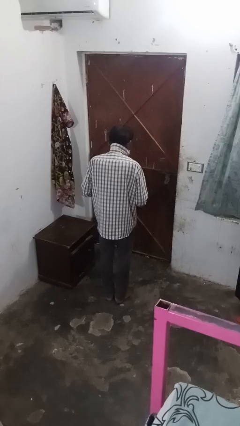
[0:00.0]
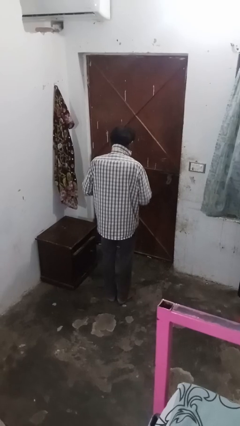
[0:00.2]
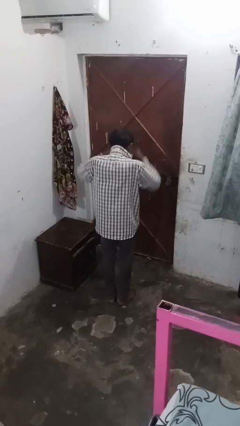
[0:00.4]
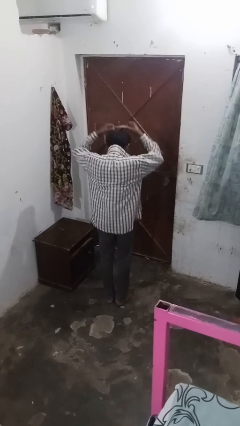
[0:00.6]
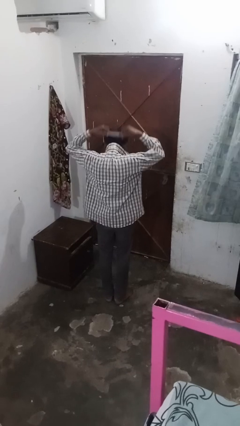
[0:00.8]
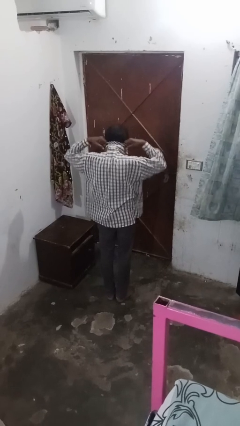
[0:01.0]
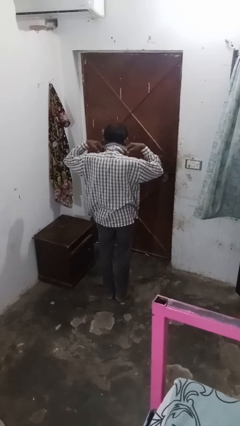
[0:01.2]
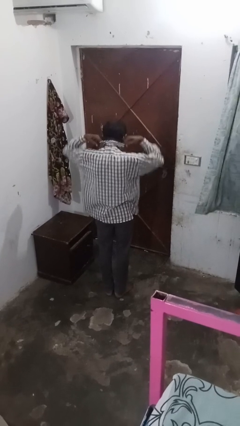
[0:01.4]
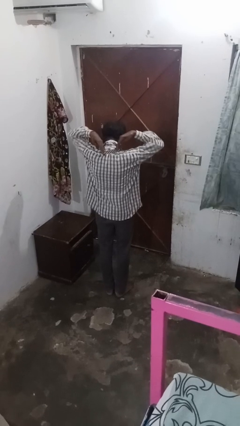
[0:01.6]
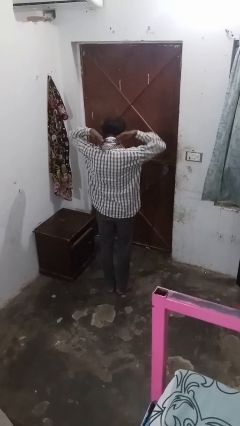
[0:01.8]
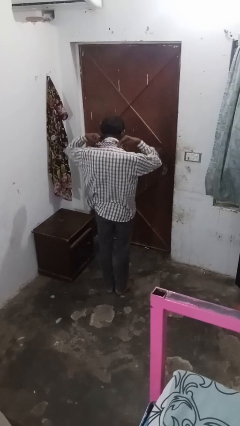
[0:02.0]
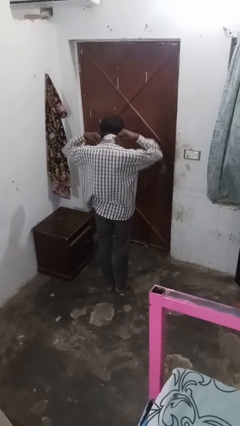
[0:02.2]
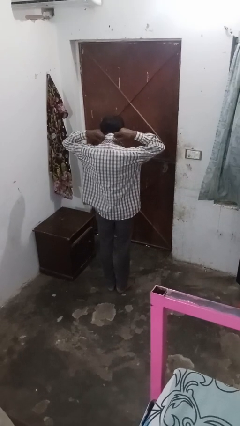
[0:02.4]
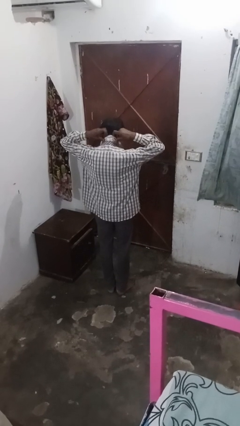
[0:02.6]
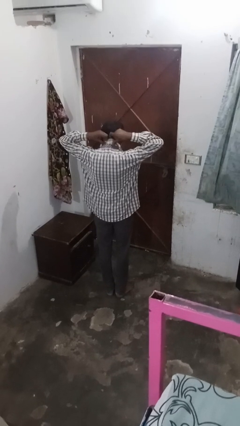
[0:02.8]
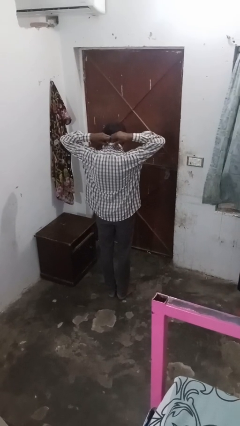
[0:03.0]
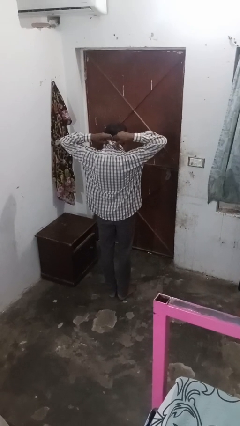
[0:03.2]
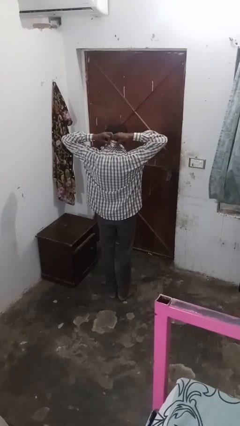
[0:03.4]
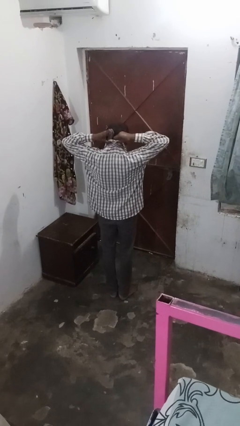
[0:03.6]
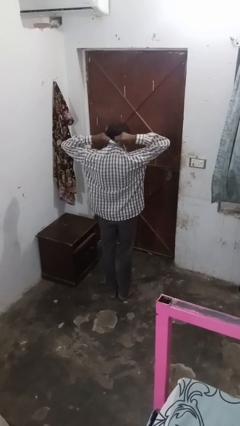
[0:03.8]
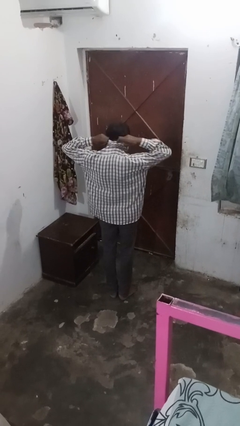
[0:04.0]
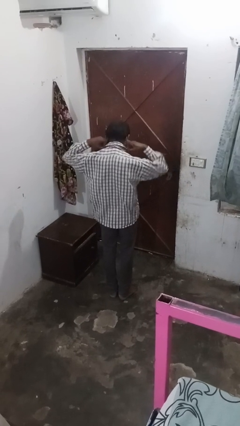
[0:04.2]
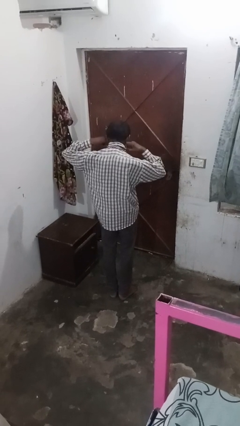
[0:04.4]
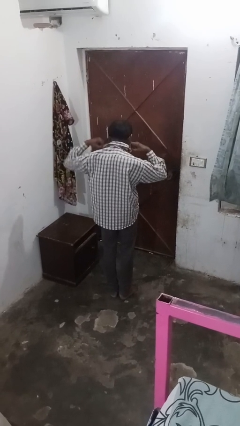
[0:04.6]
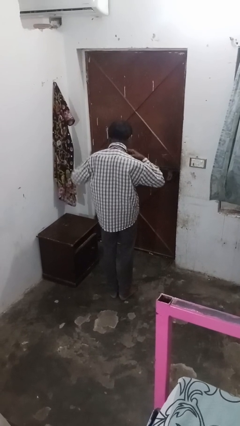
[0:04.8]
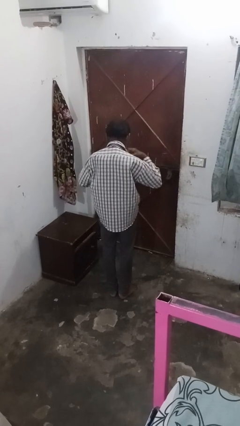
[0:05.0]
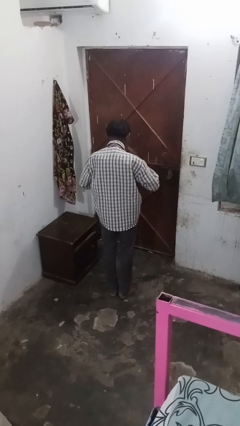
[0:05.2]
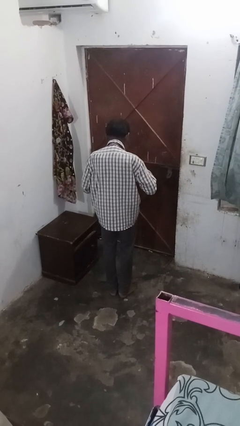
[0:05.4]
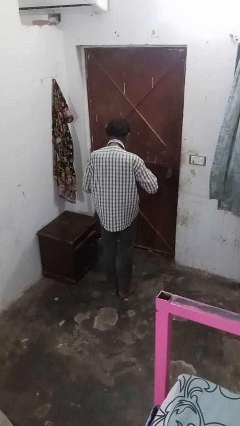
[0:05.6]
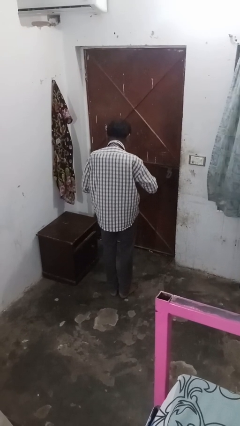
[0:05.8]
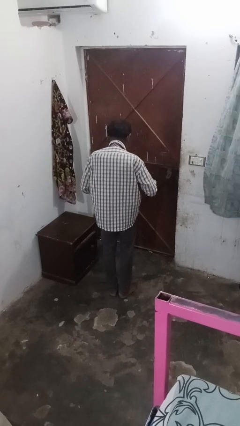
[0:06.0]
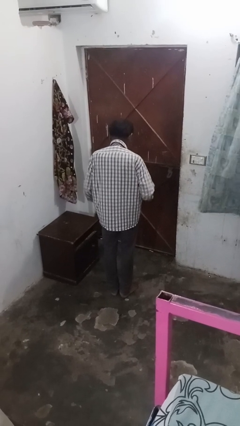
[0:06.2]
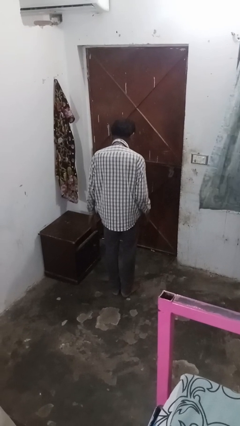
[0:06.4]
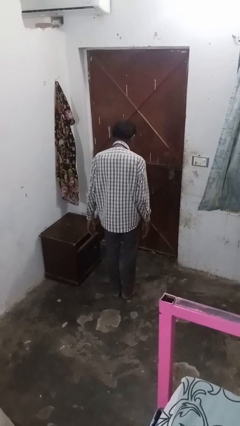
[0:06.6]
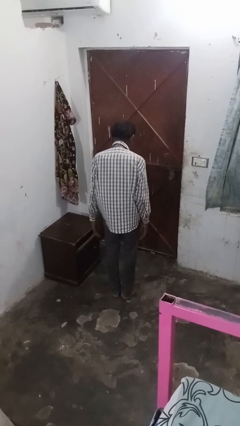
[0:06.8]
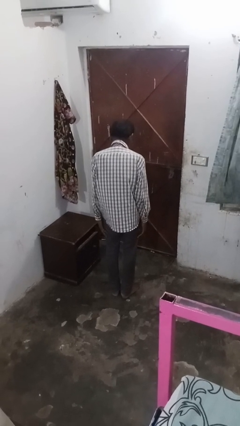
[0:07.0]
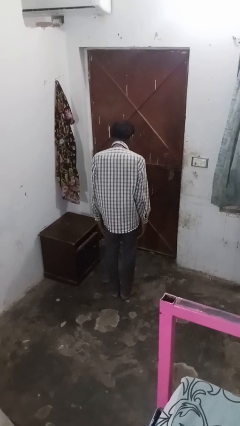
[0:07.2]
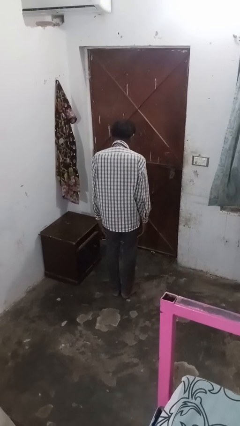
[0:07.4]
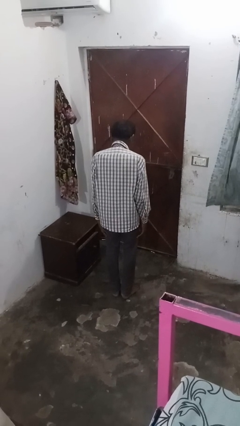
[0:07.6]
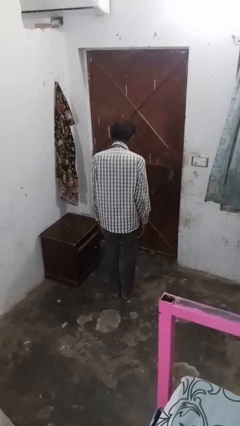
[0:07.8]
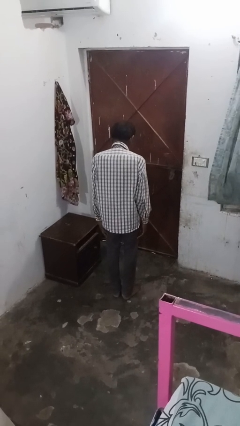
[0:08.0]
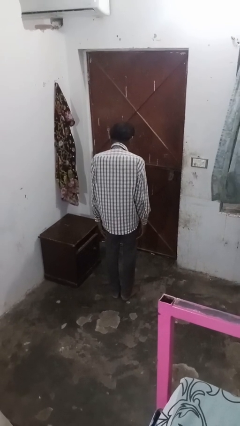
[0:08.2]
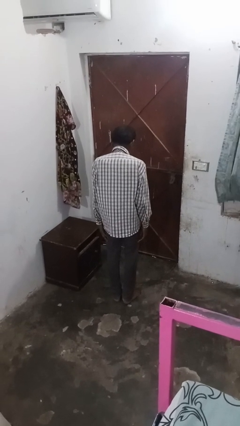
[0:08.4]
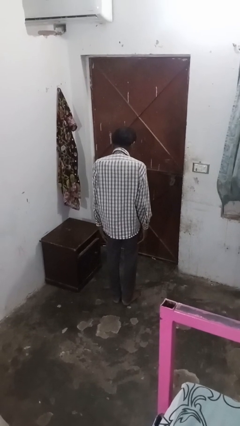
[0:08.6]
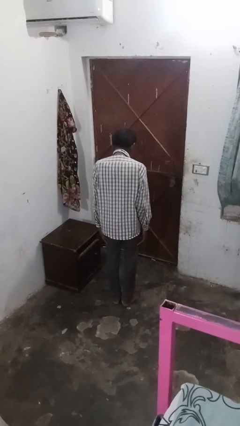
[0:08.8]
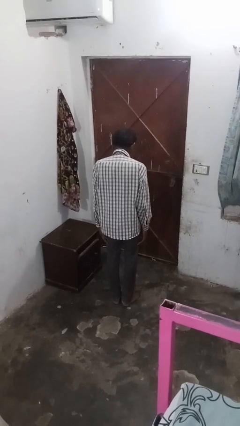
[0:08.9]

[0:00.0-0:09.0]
person puts on necktie

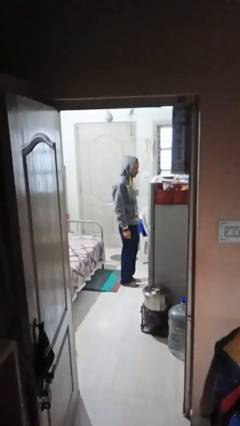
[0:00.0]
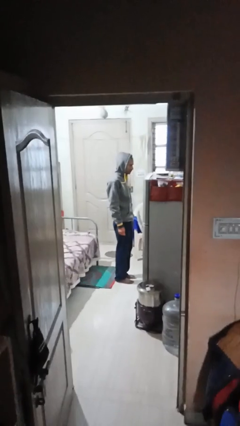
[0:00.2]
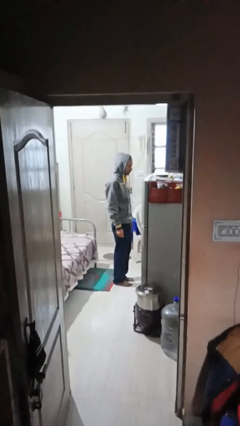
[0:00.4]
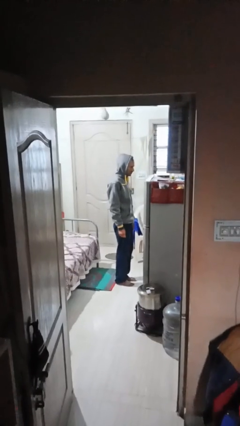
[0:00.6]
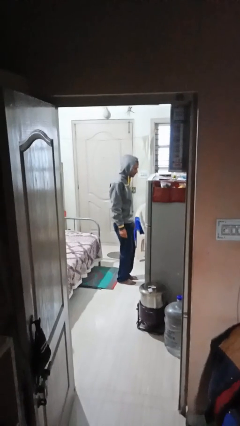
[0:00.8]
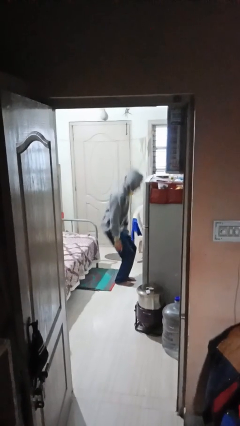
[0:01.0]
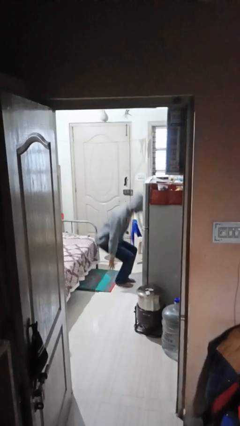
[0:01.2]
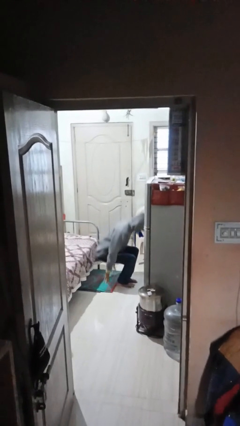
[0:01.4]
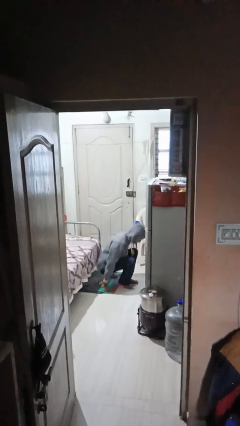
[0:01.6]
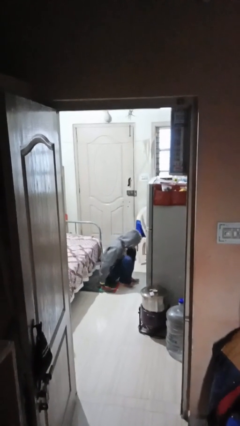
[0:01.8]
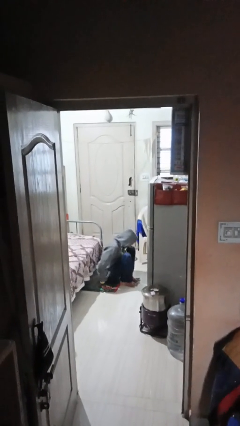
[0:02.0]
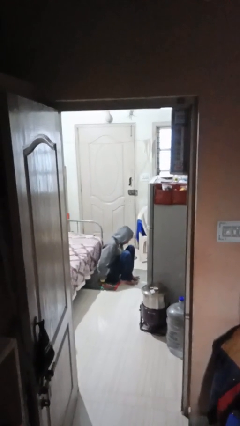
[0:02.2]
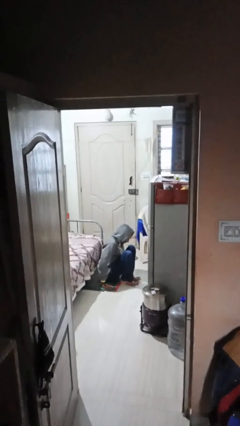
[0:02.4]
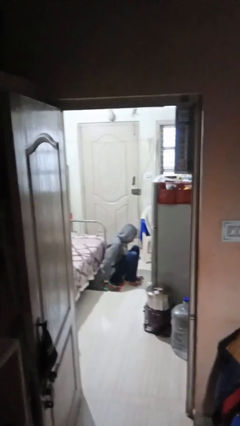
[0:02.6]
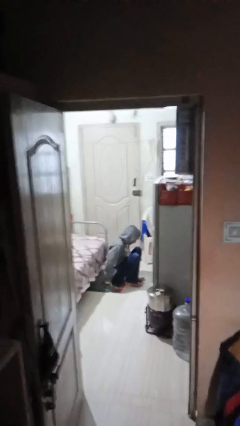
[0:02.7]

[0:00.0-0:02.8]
person sits down

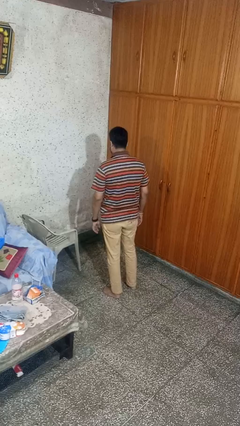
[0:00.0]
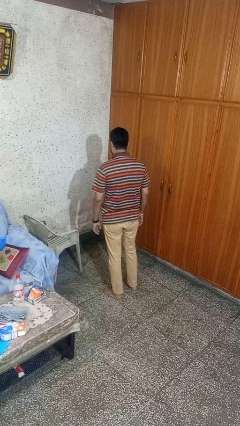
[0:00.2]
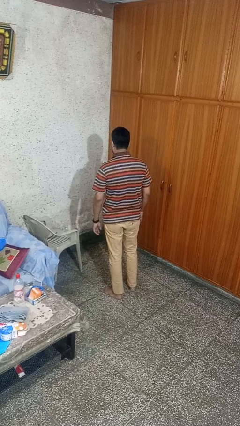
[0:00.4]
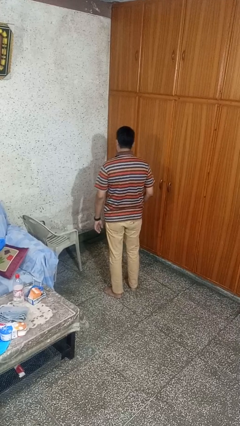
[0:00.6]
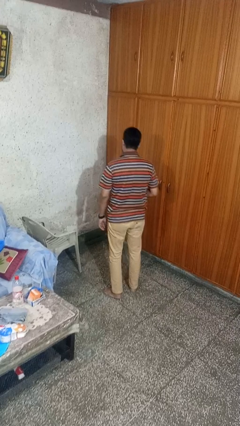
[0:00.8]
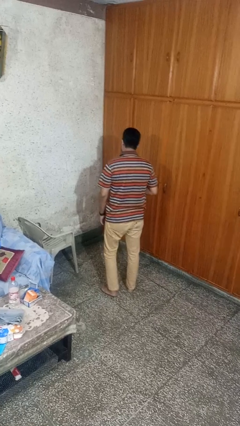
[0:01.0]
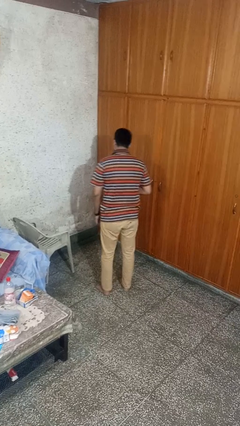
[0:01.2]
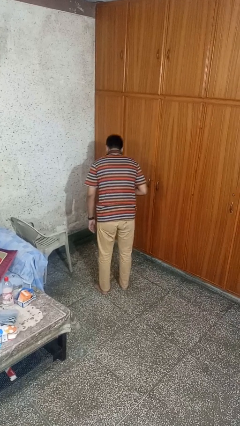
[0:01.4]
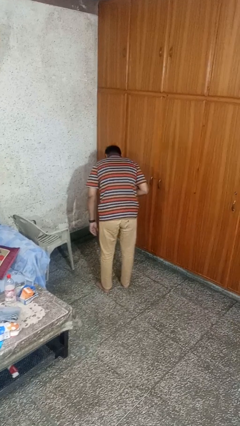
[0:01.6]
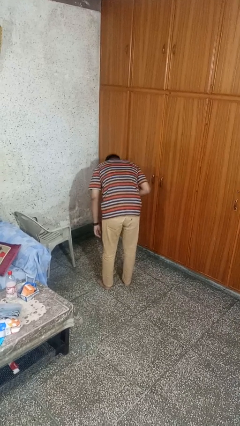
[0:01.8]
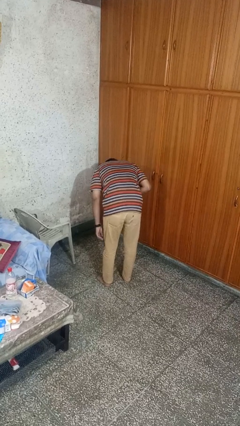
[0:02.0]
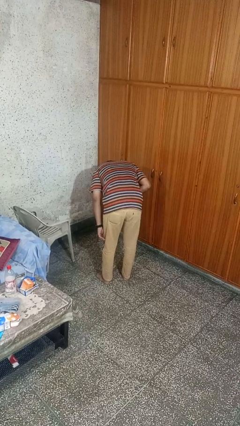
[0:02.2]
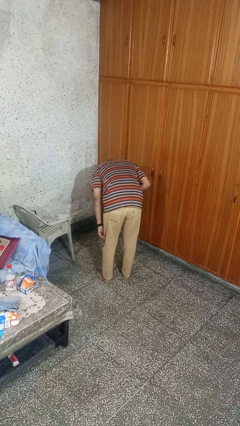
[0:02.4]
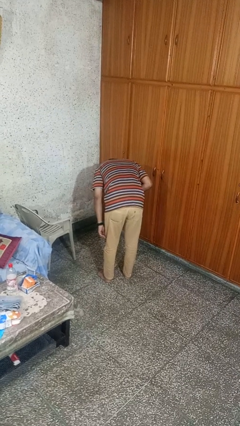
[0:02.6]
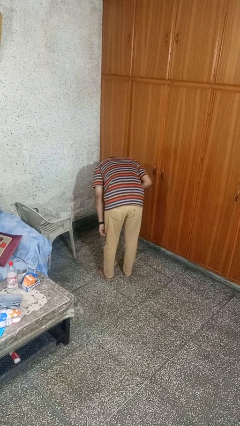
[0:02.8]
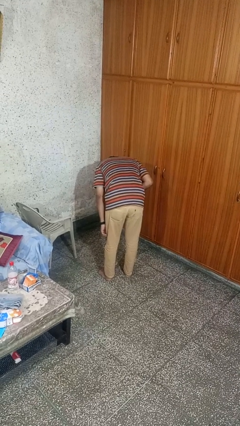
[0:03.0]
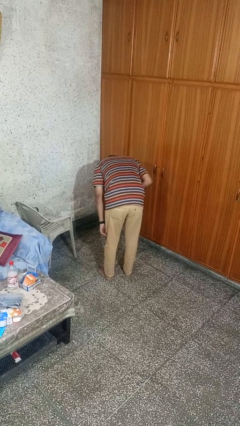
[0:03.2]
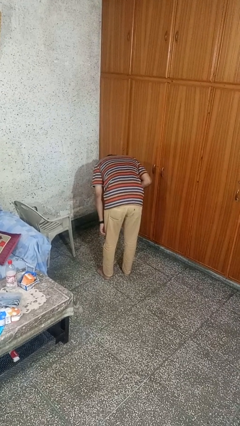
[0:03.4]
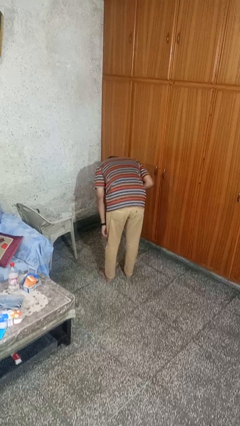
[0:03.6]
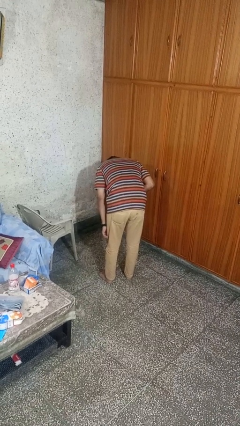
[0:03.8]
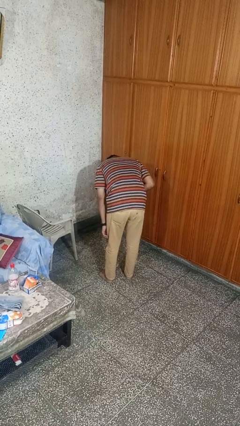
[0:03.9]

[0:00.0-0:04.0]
person bows

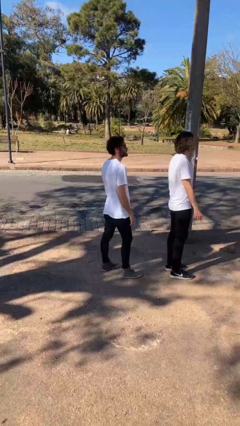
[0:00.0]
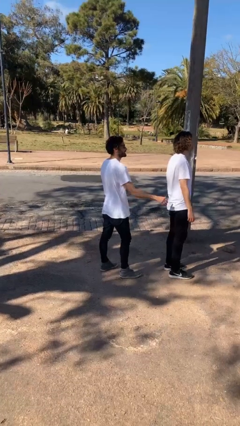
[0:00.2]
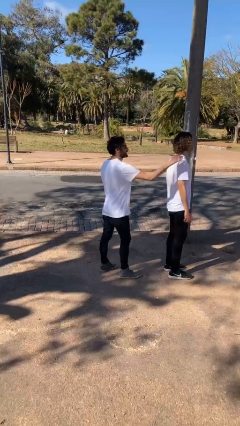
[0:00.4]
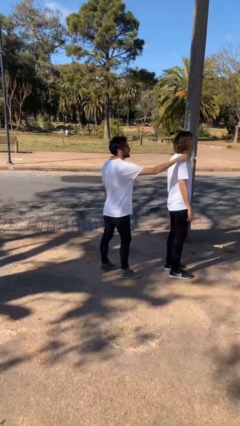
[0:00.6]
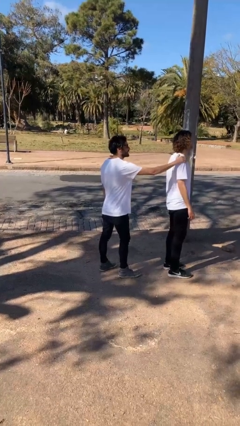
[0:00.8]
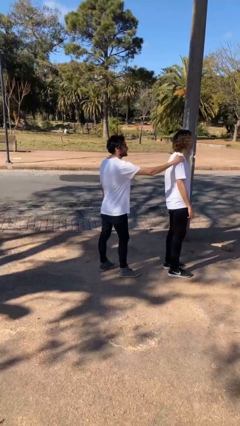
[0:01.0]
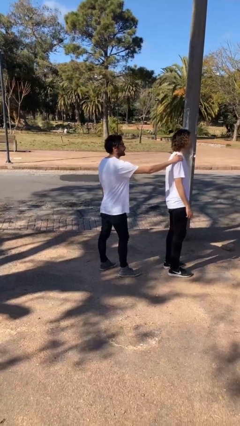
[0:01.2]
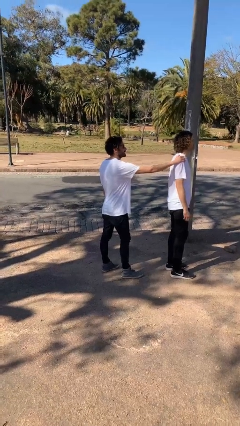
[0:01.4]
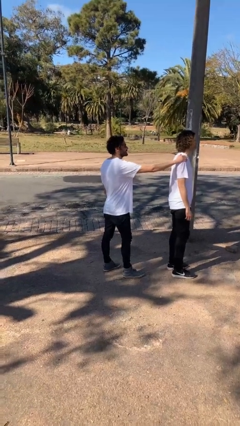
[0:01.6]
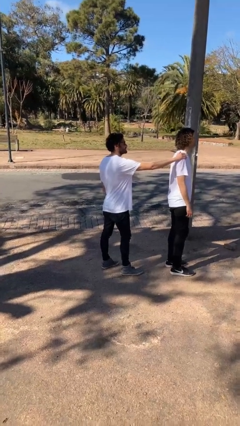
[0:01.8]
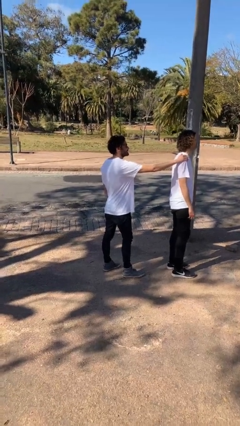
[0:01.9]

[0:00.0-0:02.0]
person grabs person by shoulder
